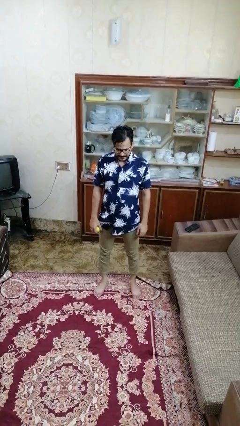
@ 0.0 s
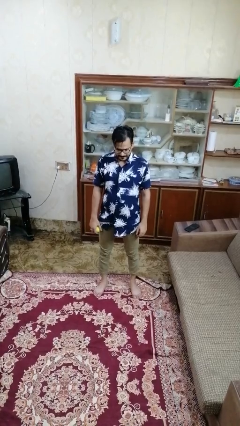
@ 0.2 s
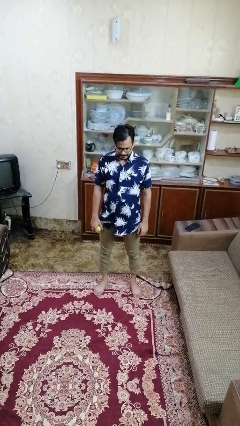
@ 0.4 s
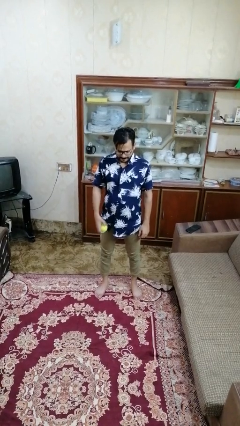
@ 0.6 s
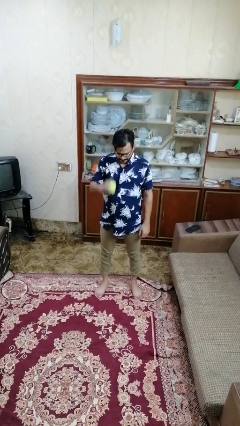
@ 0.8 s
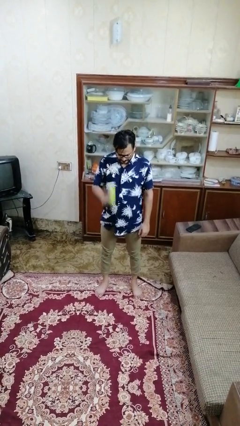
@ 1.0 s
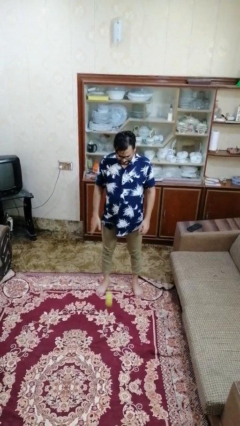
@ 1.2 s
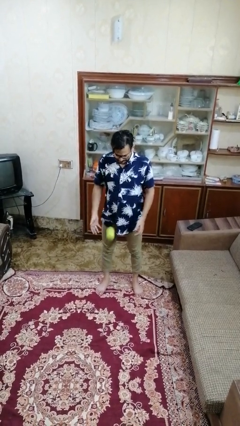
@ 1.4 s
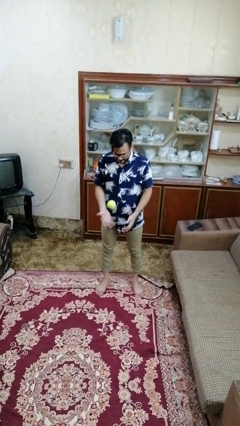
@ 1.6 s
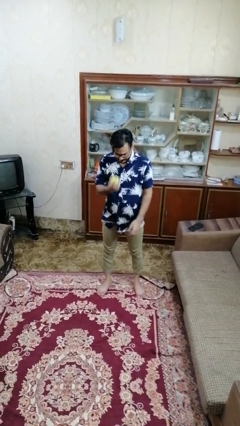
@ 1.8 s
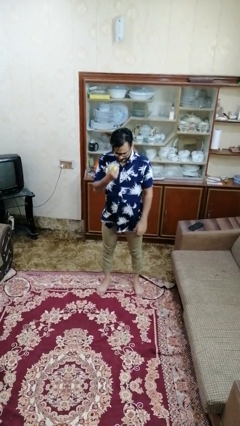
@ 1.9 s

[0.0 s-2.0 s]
person bounces ball on floor

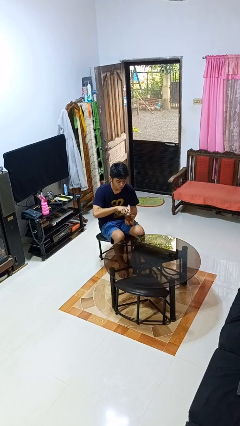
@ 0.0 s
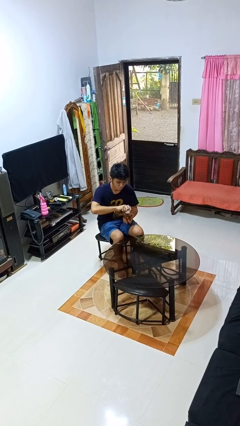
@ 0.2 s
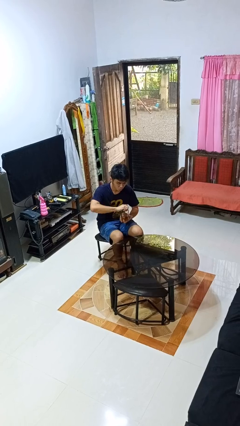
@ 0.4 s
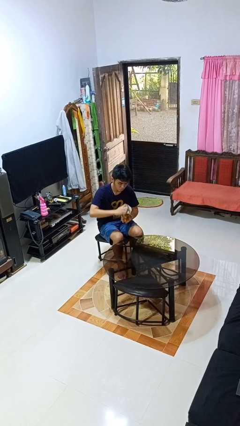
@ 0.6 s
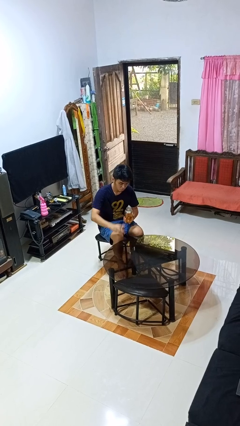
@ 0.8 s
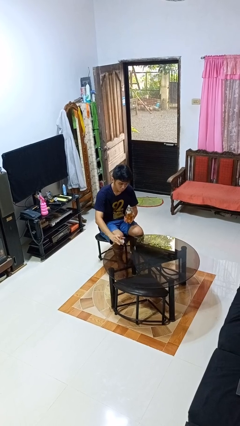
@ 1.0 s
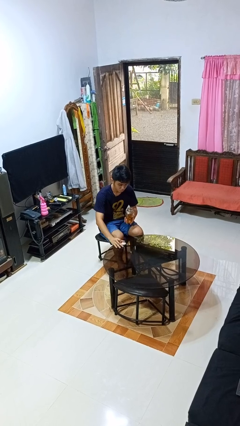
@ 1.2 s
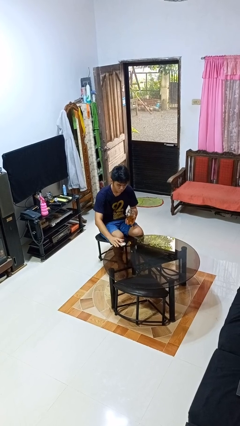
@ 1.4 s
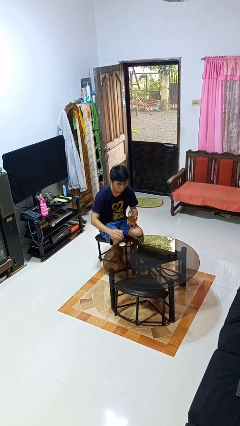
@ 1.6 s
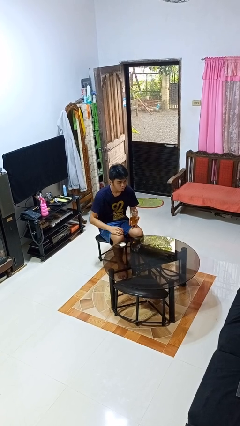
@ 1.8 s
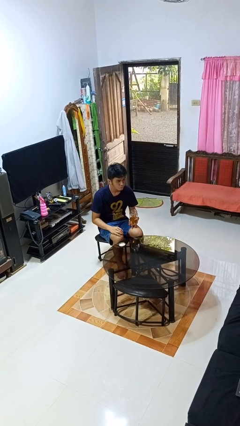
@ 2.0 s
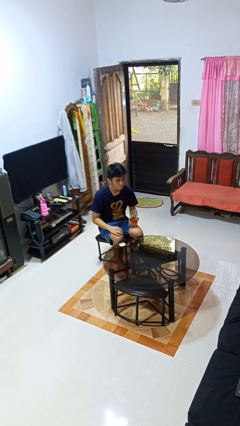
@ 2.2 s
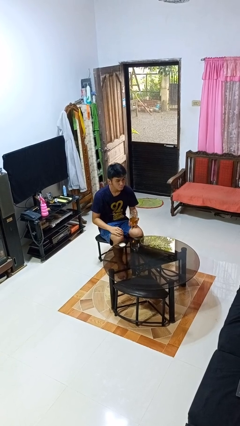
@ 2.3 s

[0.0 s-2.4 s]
person opens jar

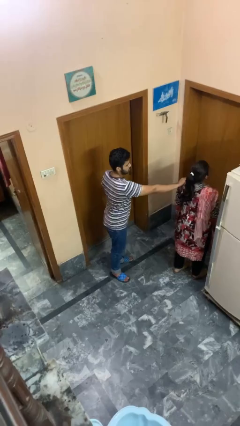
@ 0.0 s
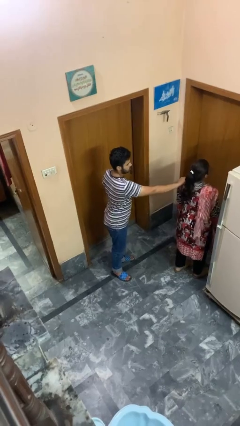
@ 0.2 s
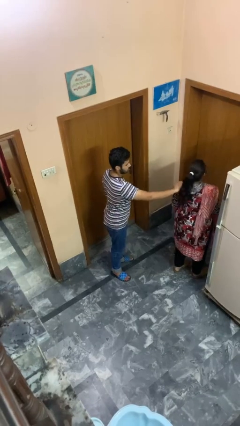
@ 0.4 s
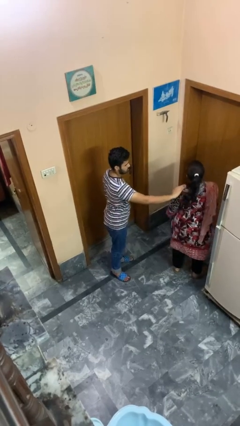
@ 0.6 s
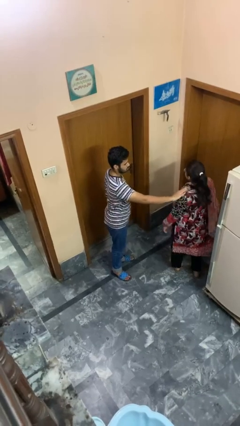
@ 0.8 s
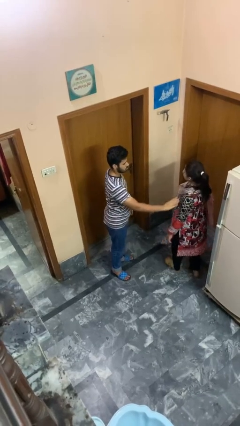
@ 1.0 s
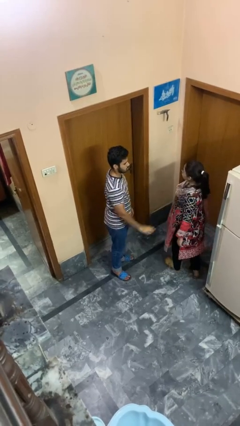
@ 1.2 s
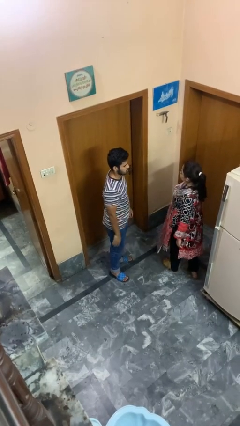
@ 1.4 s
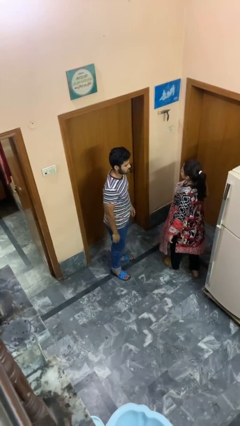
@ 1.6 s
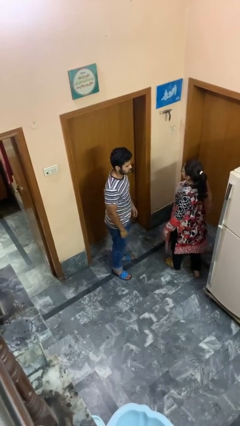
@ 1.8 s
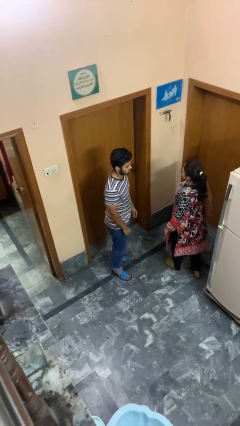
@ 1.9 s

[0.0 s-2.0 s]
person spins person around

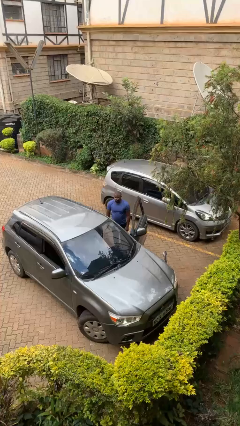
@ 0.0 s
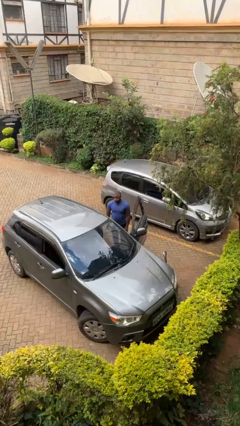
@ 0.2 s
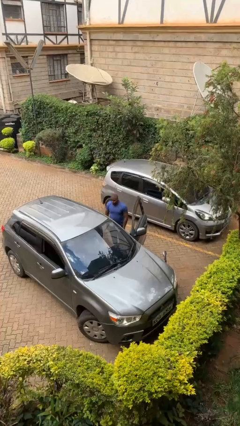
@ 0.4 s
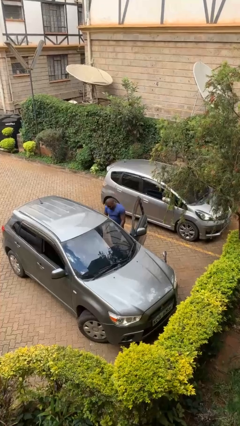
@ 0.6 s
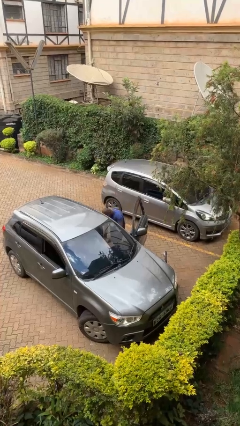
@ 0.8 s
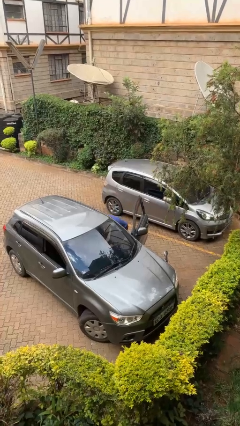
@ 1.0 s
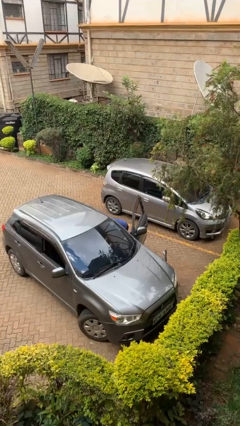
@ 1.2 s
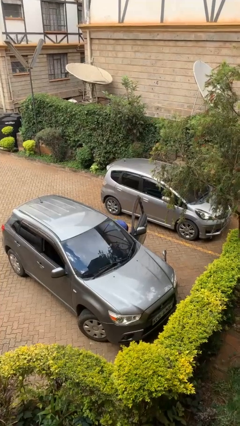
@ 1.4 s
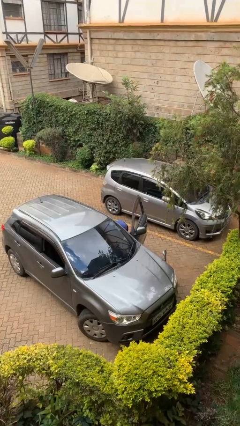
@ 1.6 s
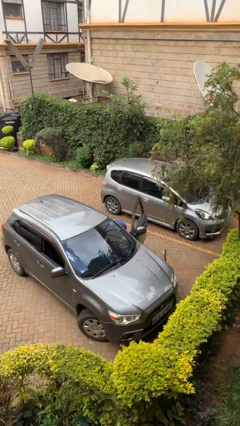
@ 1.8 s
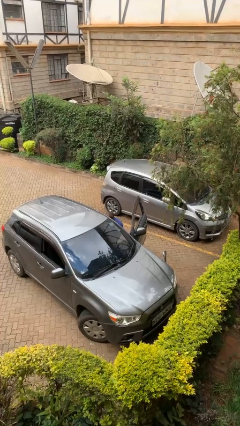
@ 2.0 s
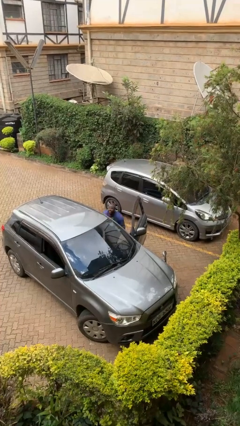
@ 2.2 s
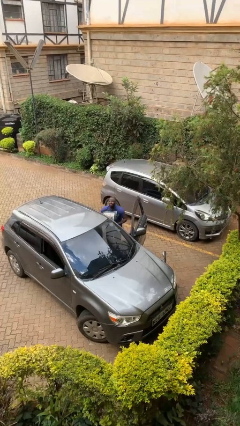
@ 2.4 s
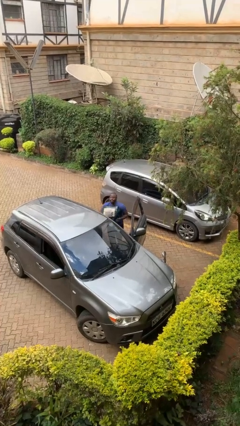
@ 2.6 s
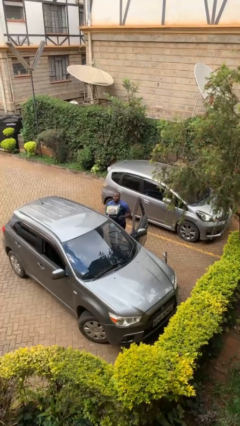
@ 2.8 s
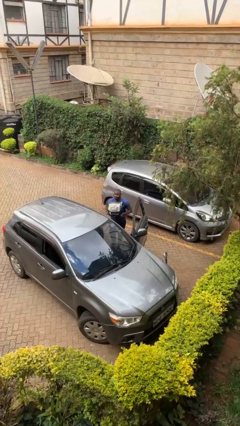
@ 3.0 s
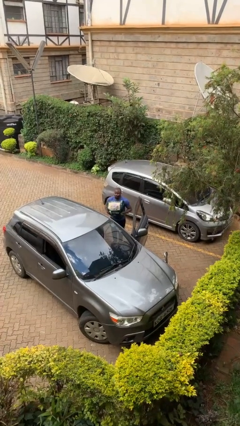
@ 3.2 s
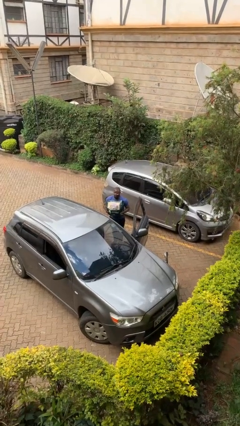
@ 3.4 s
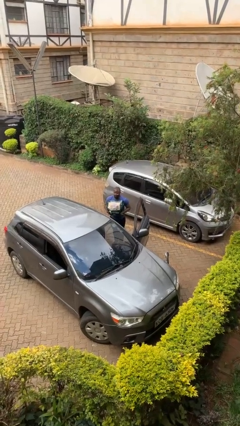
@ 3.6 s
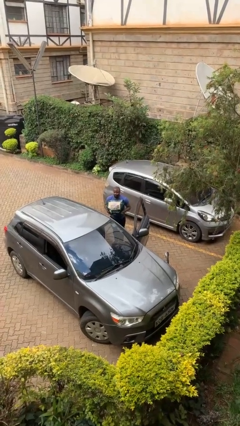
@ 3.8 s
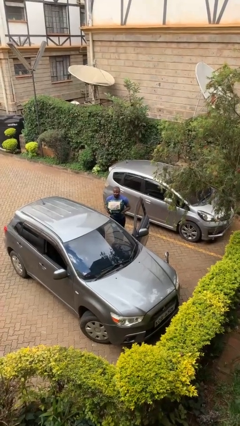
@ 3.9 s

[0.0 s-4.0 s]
person unloads car

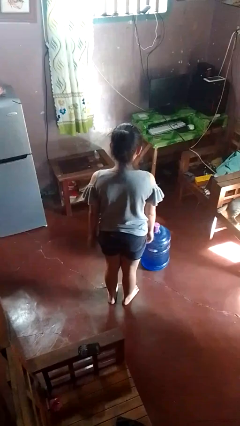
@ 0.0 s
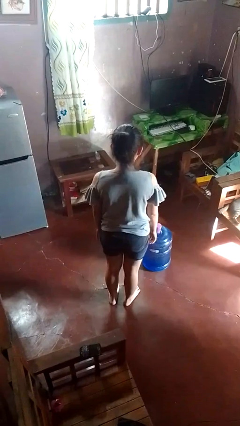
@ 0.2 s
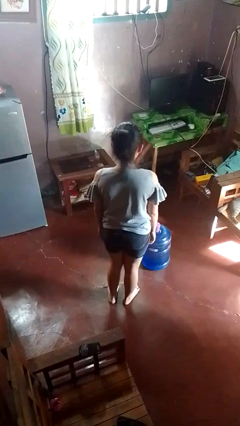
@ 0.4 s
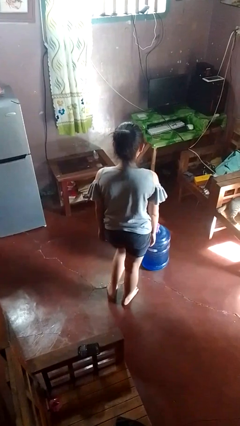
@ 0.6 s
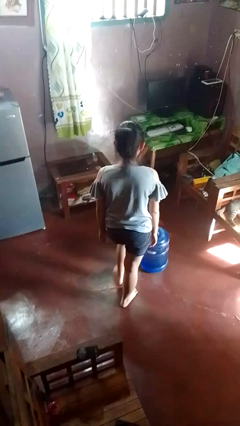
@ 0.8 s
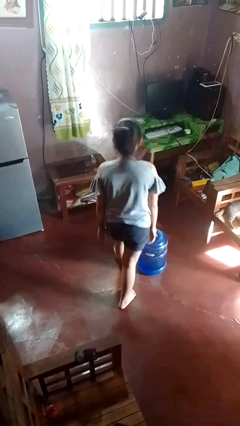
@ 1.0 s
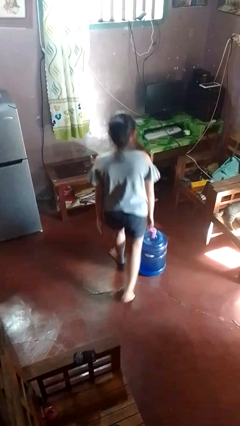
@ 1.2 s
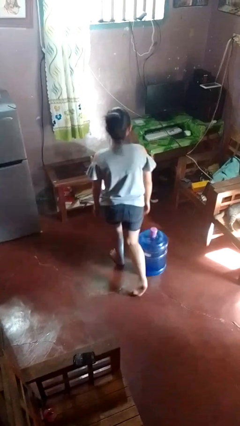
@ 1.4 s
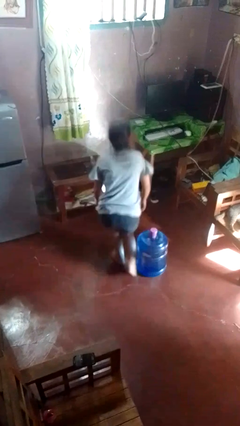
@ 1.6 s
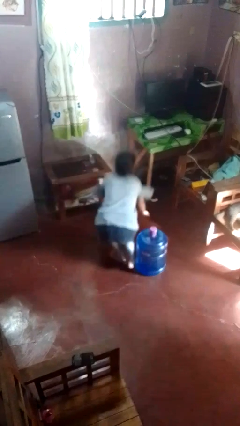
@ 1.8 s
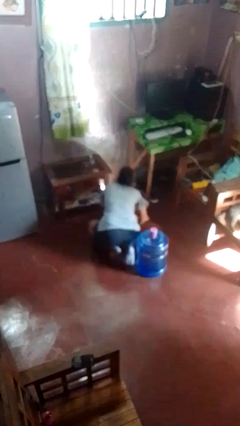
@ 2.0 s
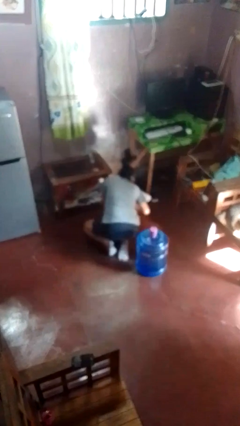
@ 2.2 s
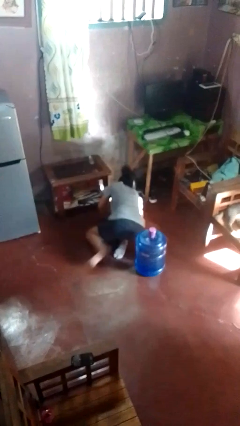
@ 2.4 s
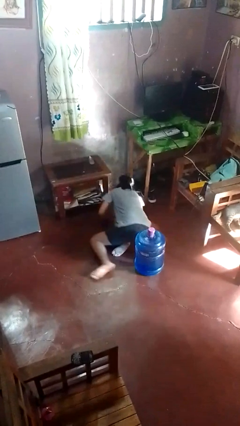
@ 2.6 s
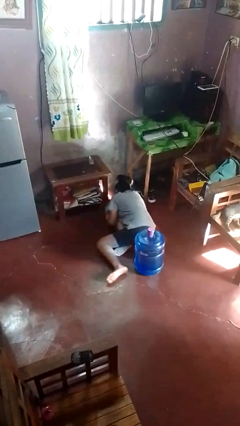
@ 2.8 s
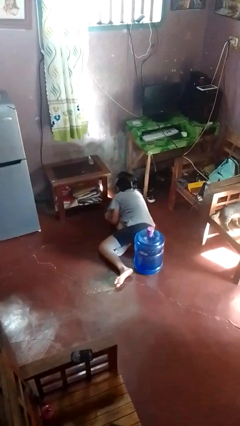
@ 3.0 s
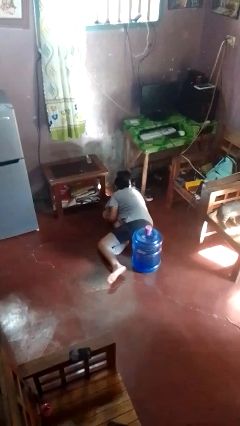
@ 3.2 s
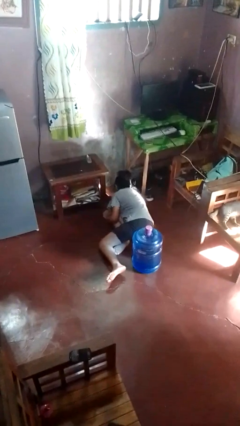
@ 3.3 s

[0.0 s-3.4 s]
person trips on object on floor

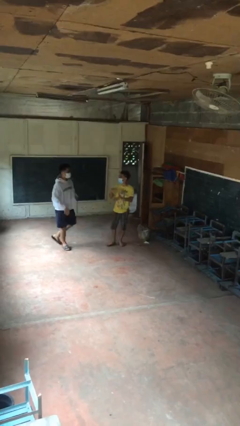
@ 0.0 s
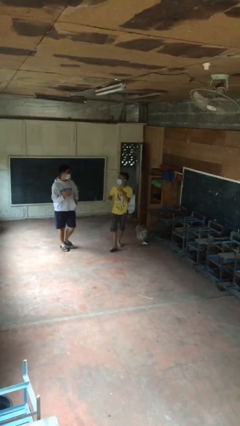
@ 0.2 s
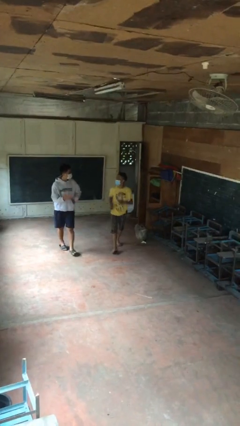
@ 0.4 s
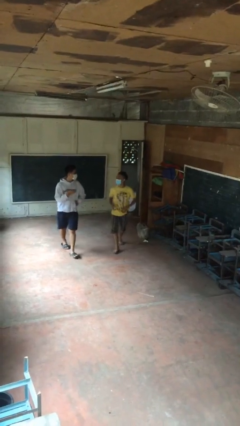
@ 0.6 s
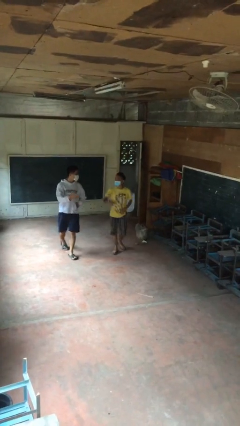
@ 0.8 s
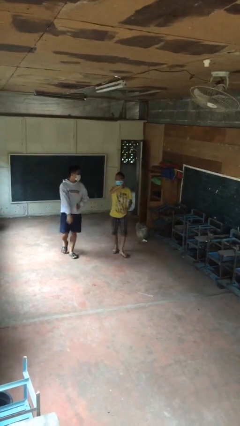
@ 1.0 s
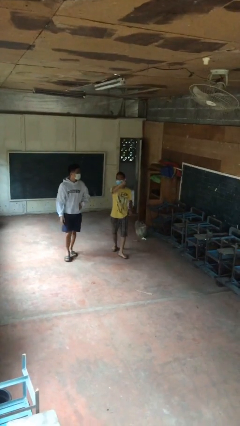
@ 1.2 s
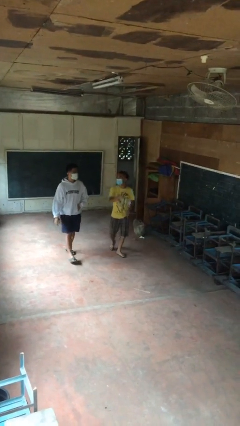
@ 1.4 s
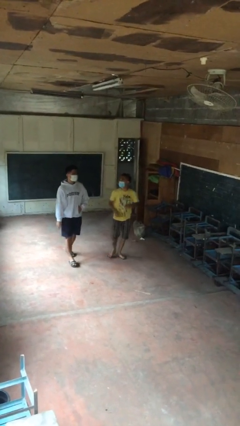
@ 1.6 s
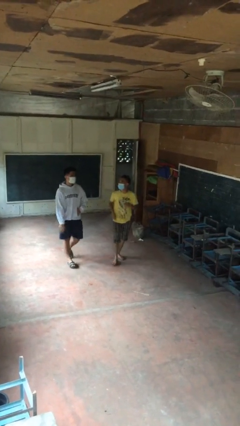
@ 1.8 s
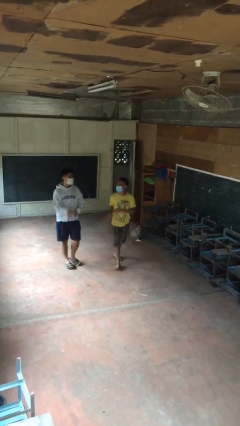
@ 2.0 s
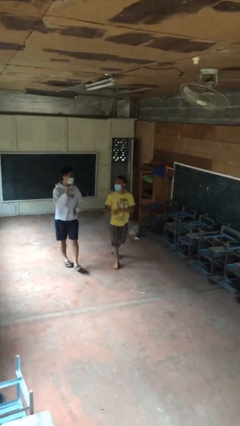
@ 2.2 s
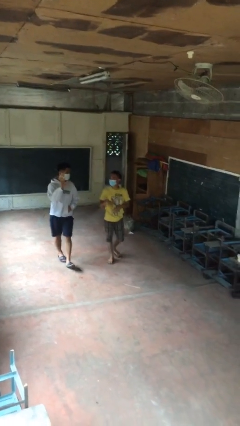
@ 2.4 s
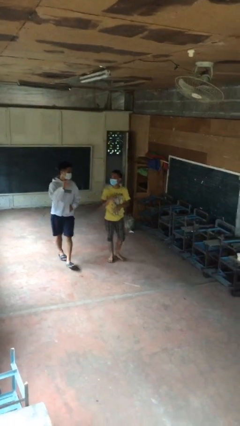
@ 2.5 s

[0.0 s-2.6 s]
person talks to person

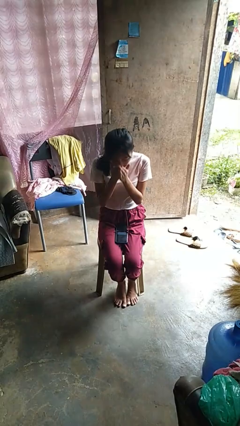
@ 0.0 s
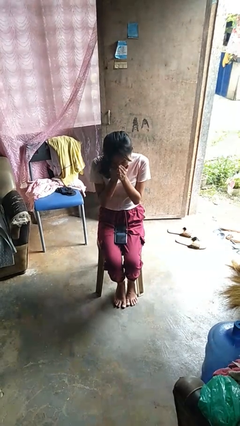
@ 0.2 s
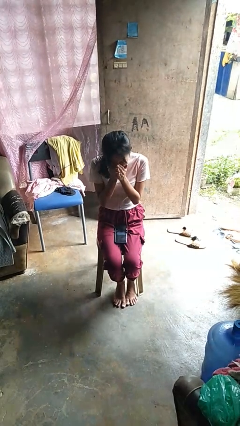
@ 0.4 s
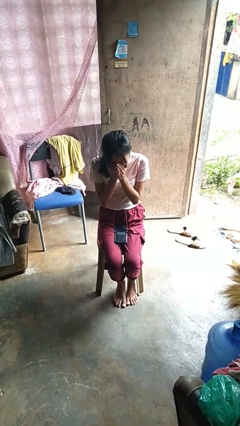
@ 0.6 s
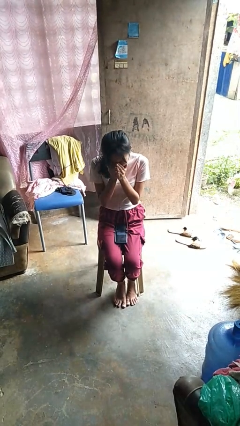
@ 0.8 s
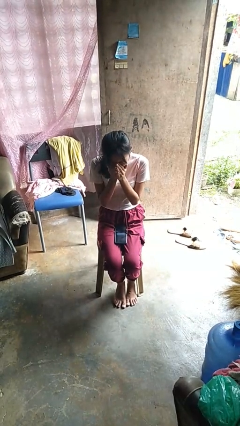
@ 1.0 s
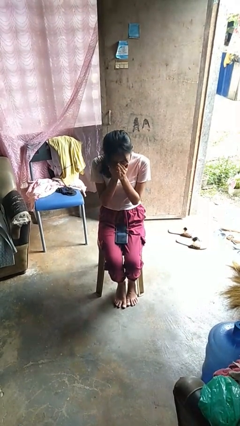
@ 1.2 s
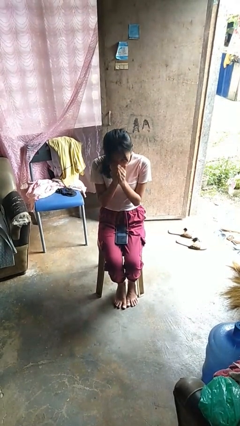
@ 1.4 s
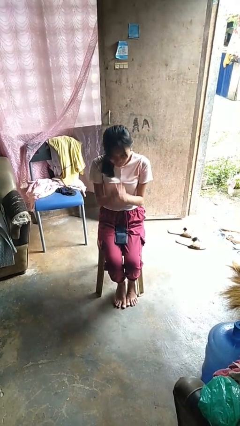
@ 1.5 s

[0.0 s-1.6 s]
person sneezes into hand
